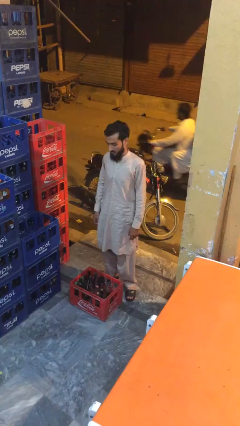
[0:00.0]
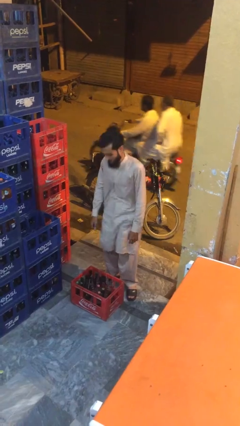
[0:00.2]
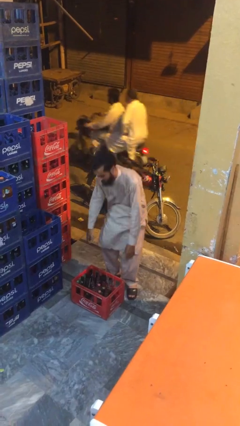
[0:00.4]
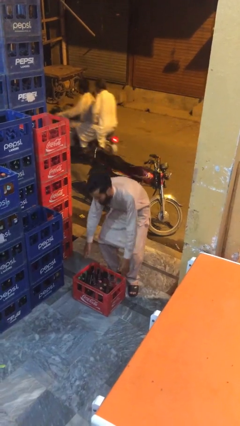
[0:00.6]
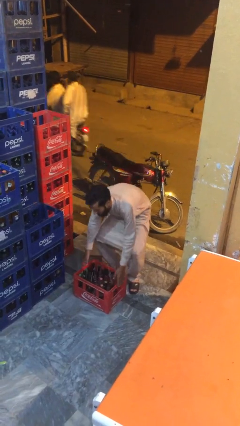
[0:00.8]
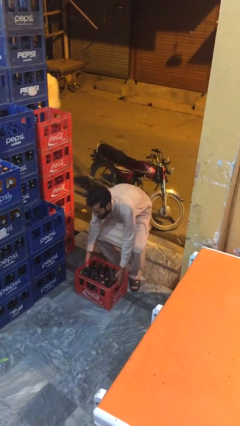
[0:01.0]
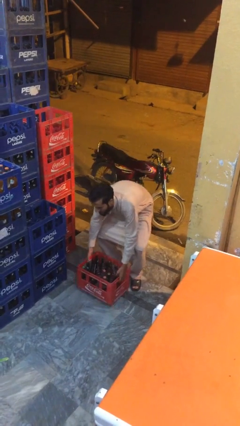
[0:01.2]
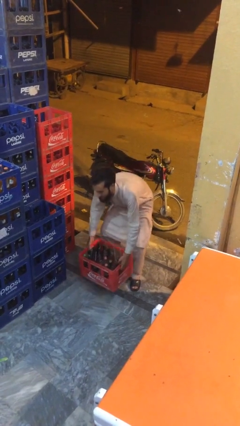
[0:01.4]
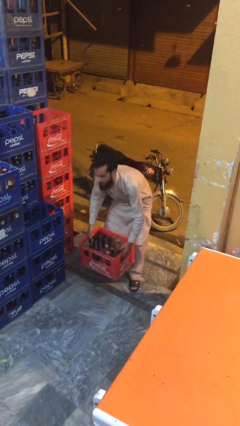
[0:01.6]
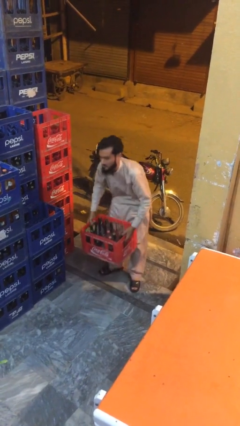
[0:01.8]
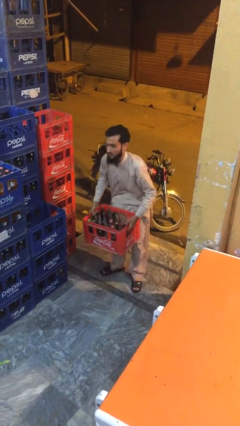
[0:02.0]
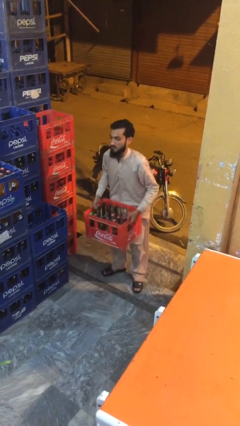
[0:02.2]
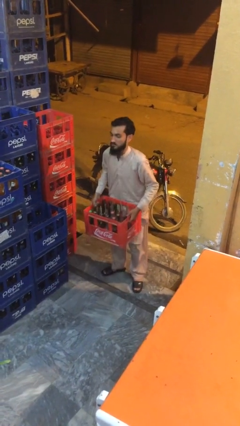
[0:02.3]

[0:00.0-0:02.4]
person picks up object from floor

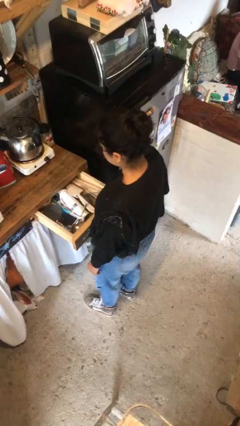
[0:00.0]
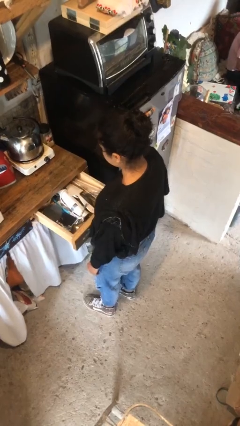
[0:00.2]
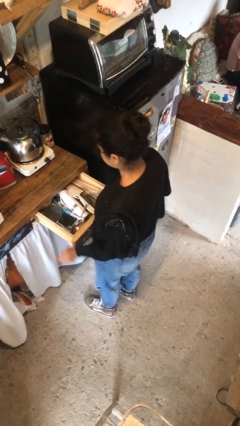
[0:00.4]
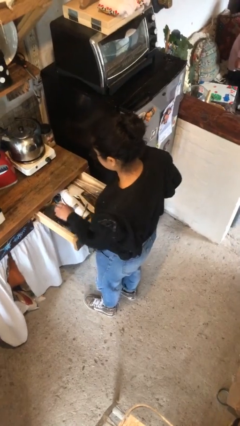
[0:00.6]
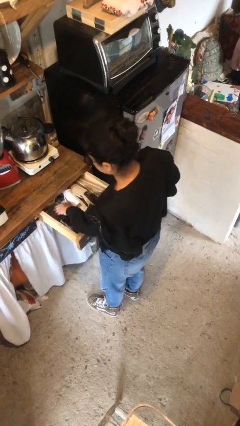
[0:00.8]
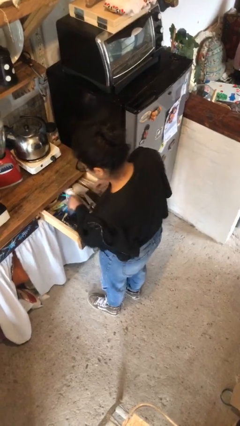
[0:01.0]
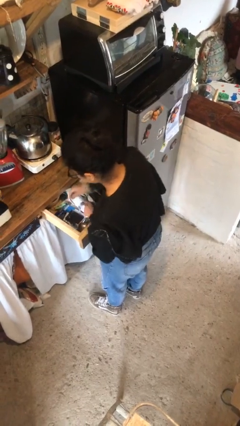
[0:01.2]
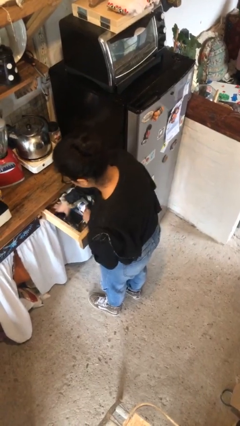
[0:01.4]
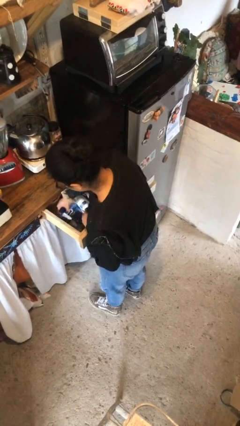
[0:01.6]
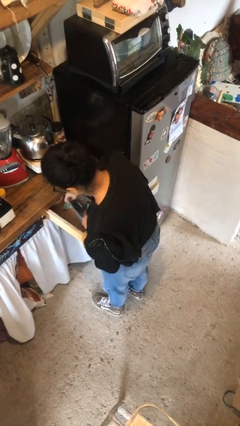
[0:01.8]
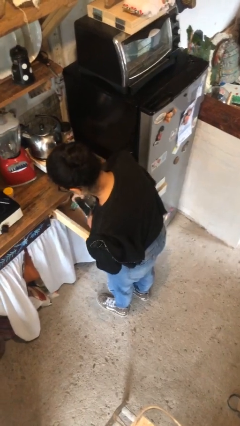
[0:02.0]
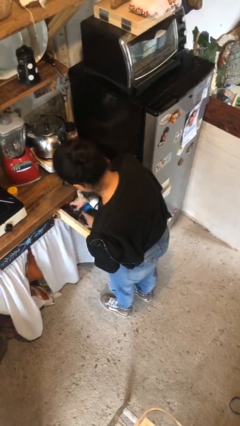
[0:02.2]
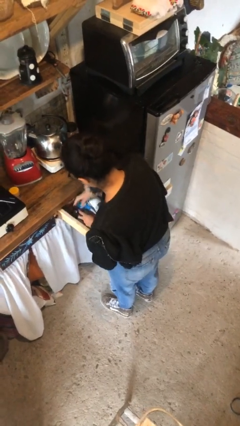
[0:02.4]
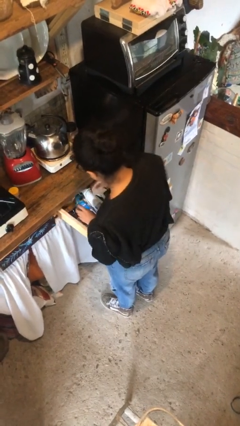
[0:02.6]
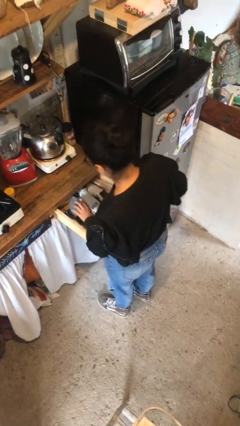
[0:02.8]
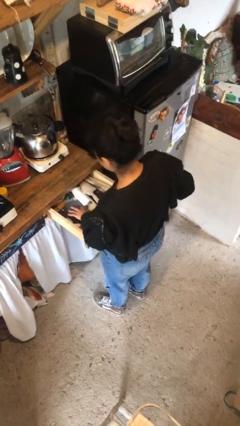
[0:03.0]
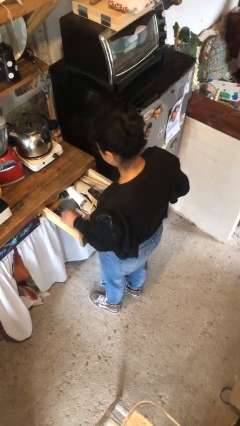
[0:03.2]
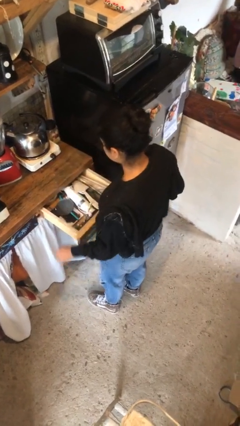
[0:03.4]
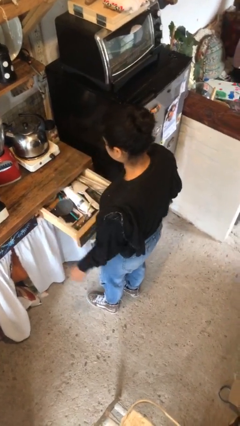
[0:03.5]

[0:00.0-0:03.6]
person searches in kitchen drawer

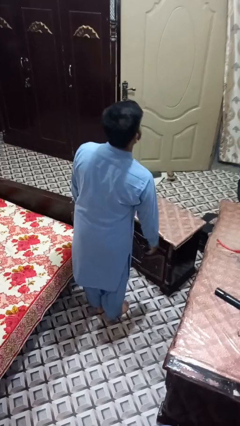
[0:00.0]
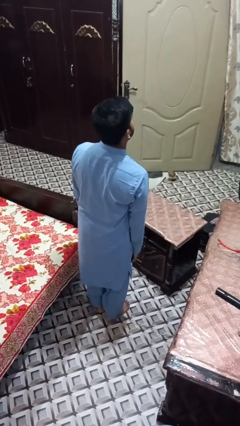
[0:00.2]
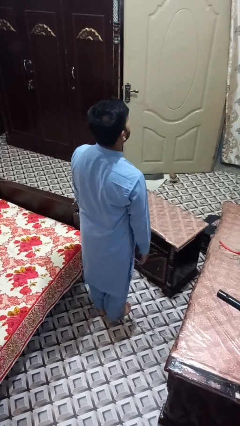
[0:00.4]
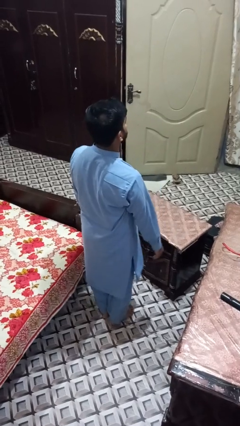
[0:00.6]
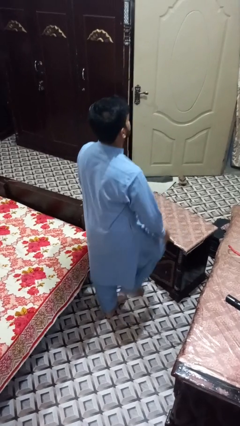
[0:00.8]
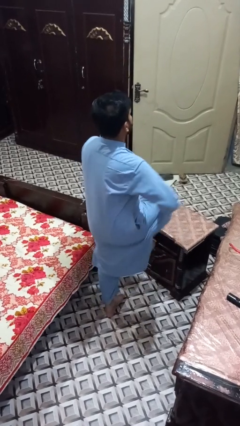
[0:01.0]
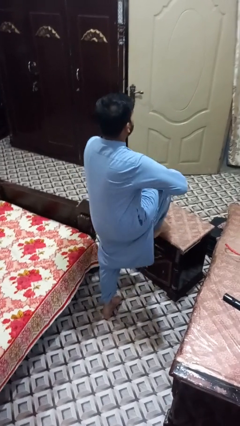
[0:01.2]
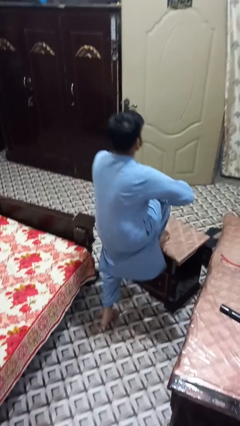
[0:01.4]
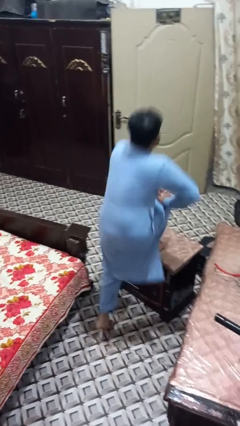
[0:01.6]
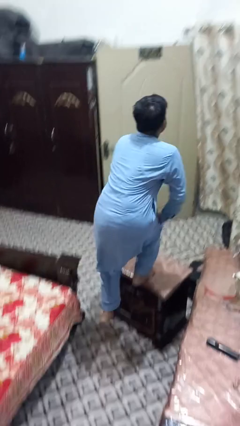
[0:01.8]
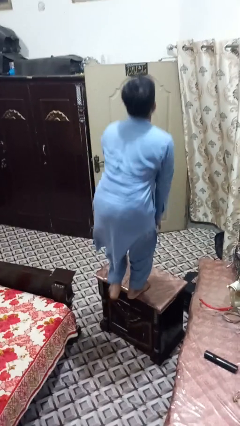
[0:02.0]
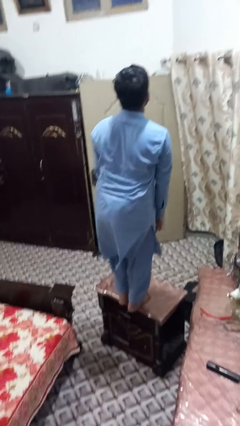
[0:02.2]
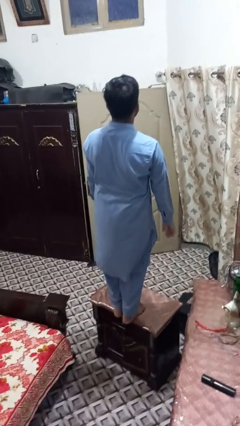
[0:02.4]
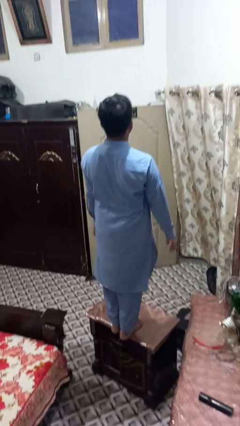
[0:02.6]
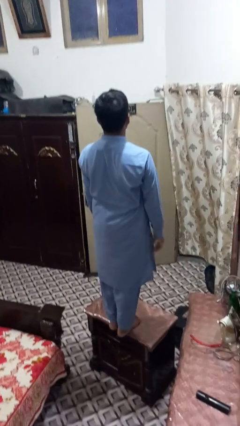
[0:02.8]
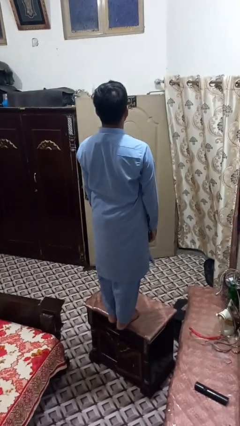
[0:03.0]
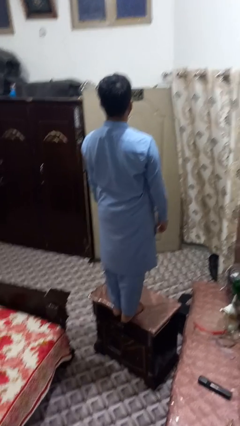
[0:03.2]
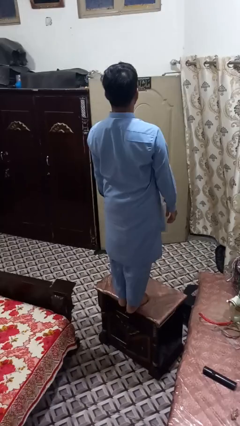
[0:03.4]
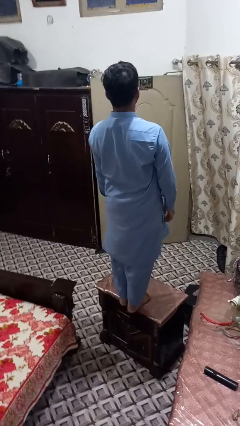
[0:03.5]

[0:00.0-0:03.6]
person climbs on table

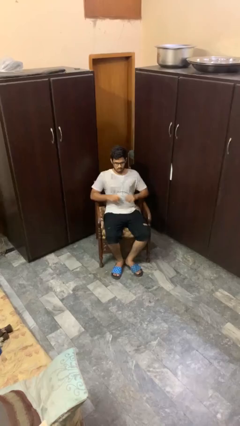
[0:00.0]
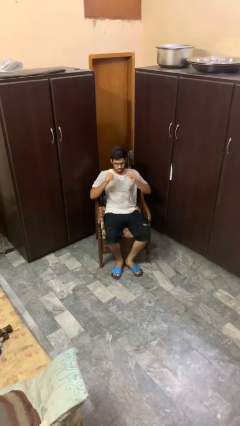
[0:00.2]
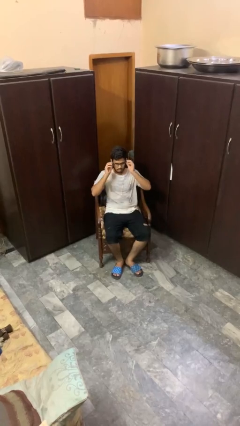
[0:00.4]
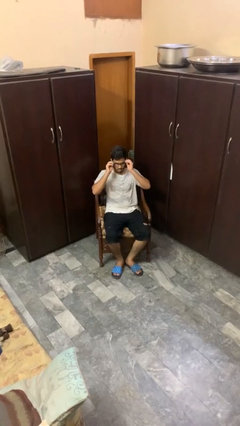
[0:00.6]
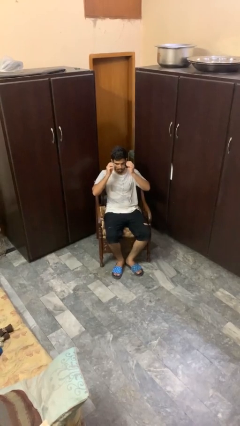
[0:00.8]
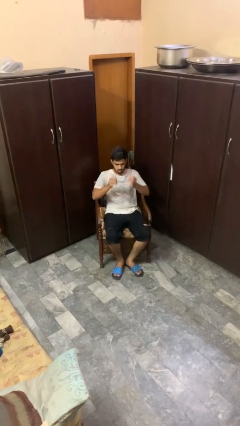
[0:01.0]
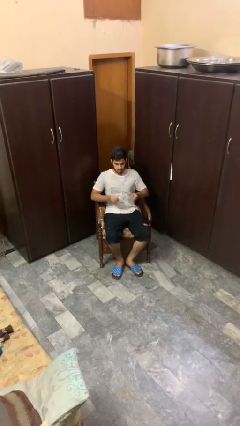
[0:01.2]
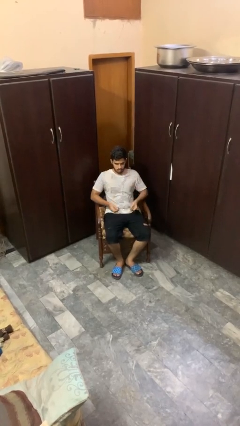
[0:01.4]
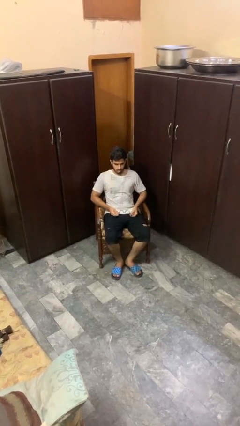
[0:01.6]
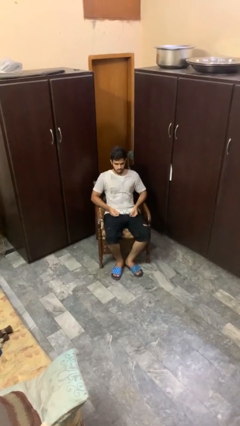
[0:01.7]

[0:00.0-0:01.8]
person takes off glasses

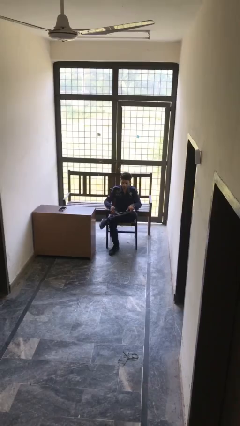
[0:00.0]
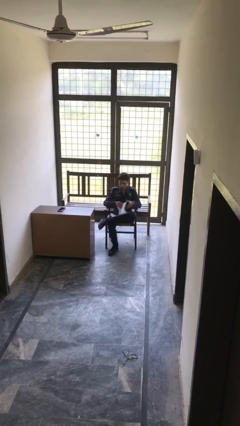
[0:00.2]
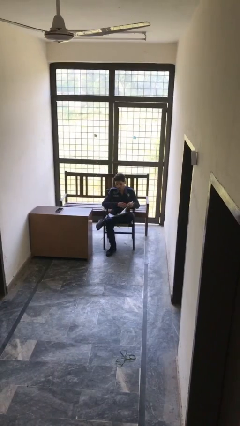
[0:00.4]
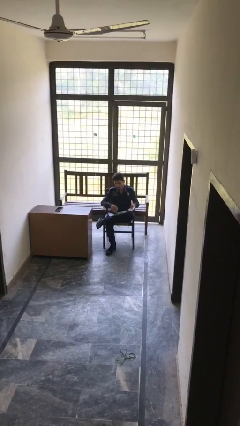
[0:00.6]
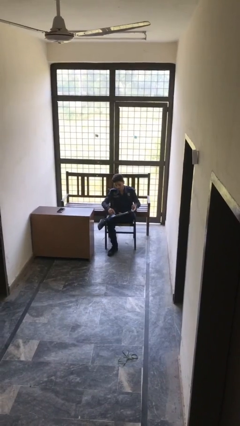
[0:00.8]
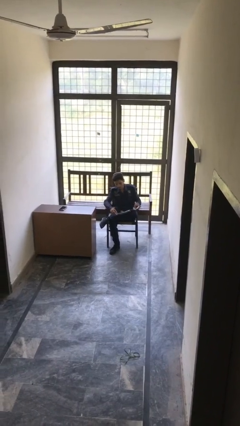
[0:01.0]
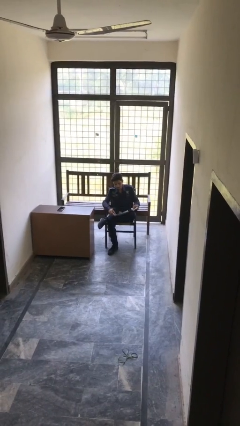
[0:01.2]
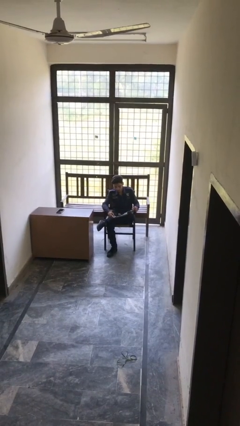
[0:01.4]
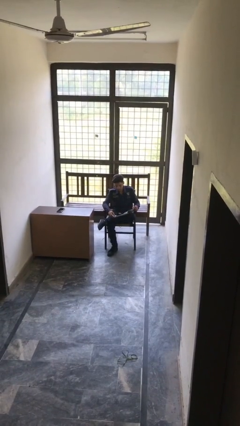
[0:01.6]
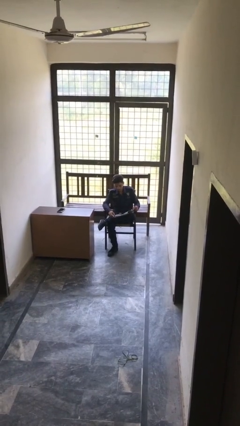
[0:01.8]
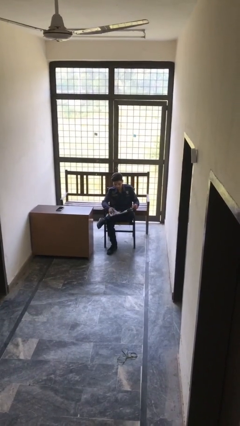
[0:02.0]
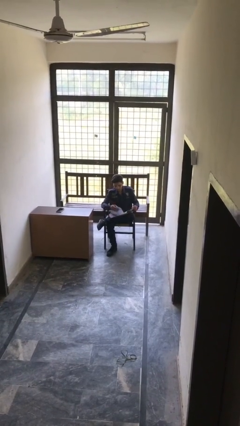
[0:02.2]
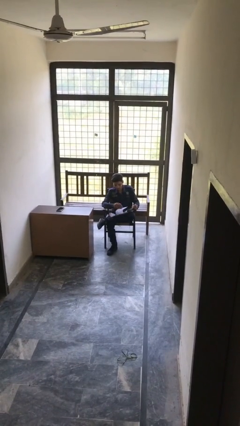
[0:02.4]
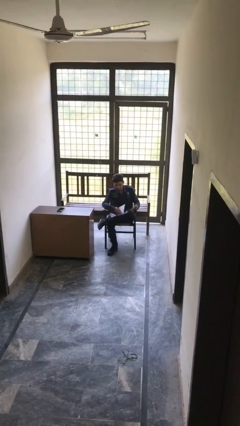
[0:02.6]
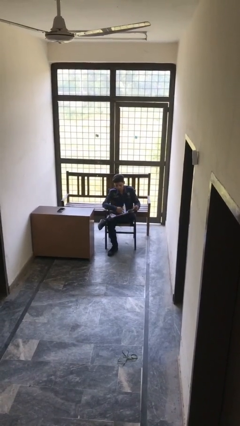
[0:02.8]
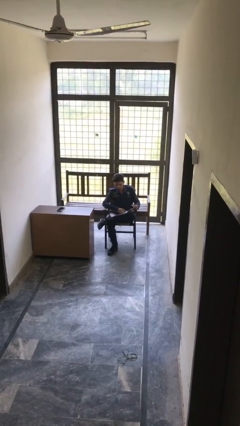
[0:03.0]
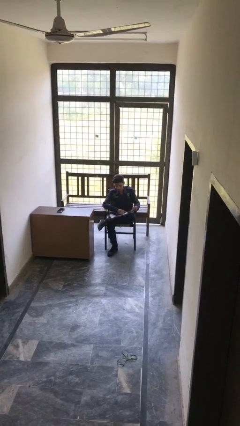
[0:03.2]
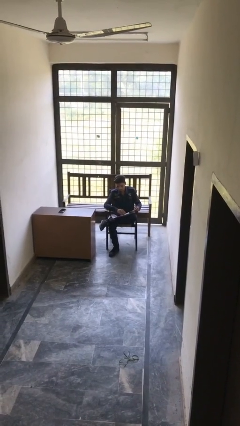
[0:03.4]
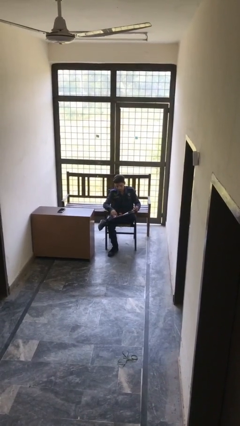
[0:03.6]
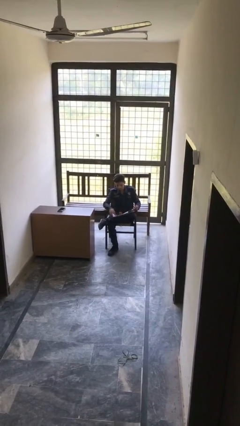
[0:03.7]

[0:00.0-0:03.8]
person reads document

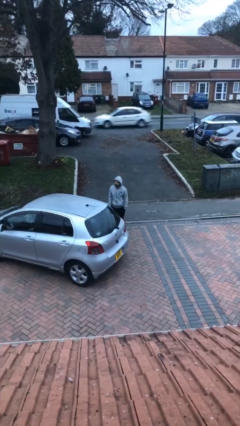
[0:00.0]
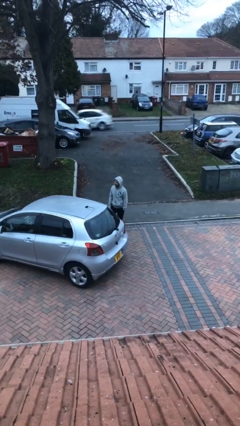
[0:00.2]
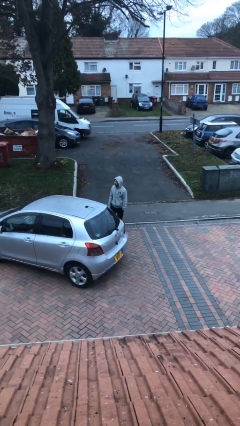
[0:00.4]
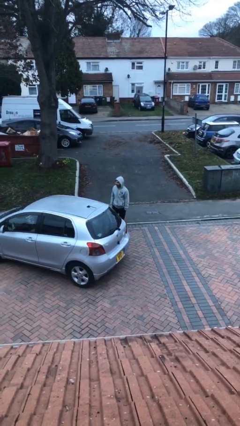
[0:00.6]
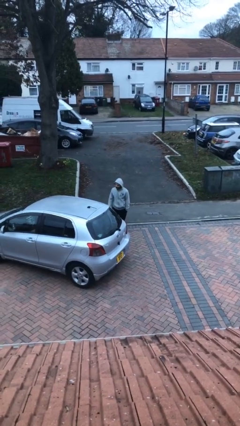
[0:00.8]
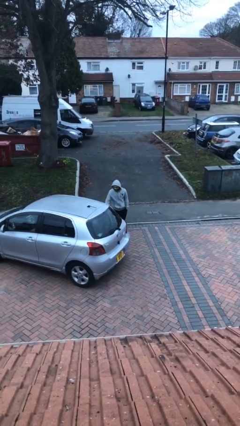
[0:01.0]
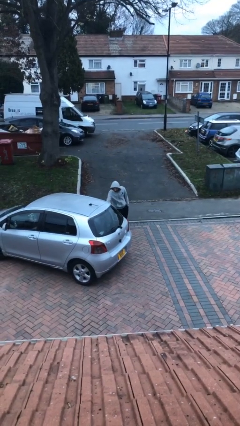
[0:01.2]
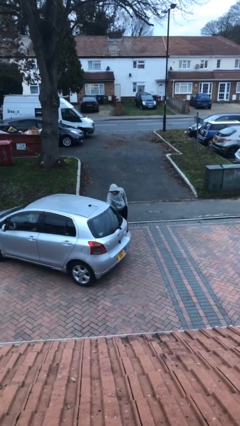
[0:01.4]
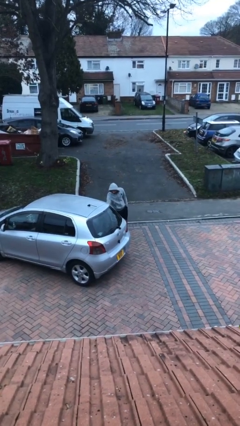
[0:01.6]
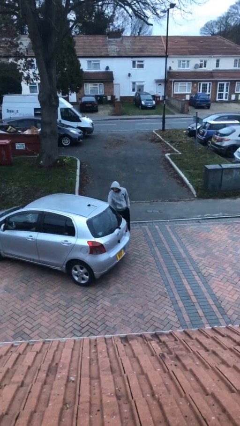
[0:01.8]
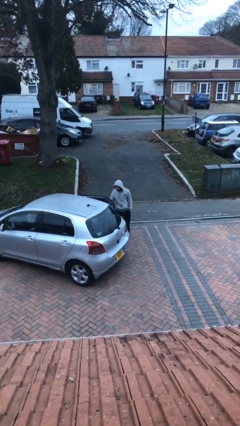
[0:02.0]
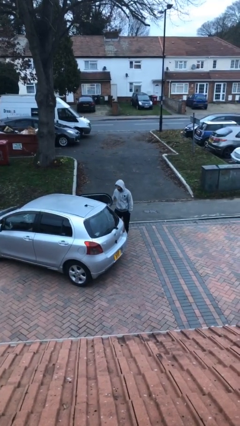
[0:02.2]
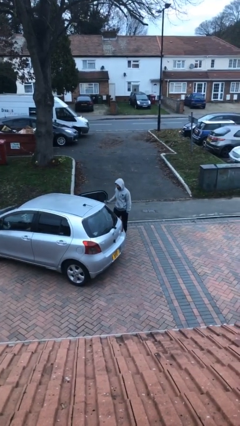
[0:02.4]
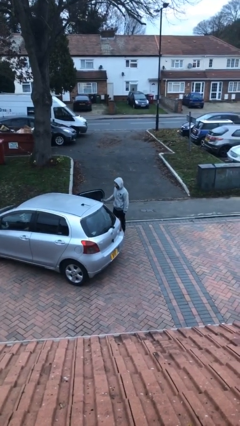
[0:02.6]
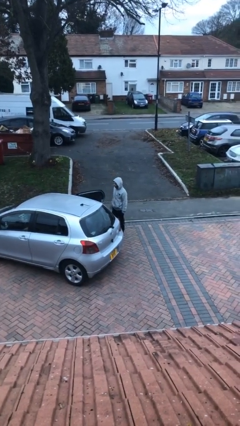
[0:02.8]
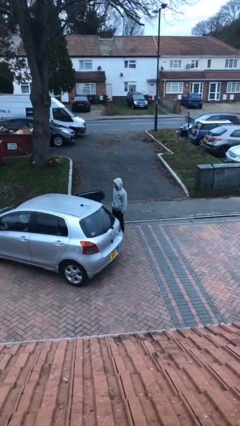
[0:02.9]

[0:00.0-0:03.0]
person opens car door
